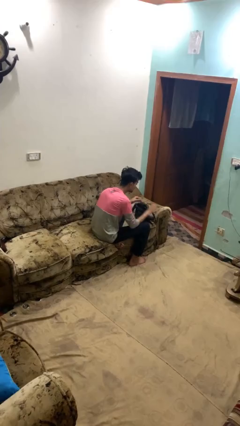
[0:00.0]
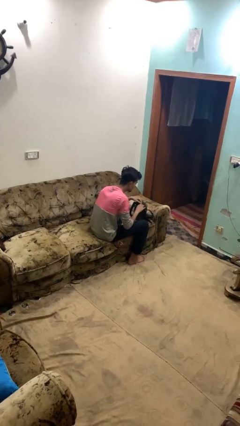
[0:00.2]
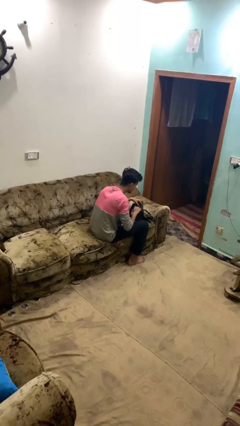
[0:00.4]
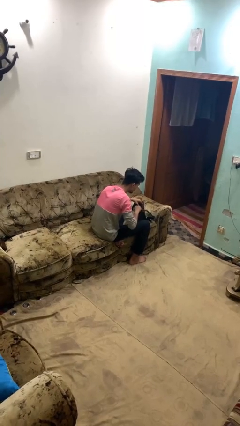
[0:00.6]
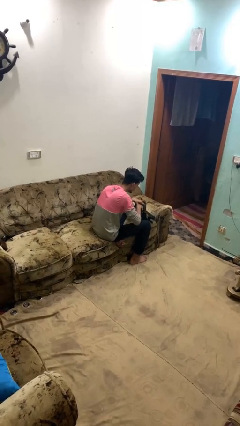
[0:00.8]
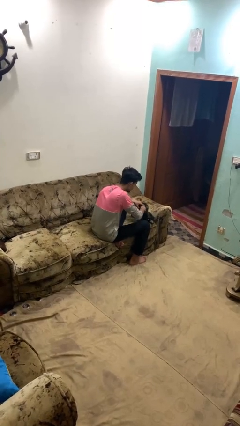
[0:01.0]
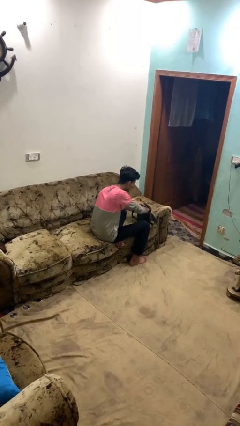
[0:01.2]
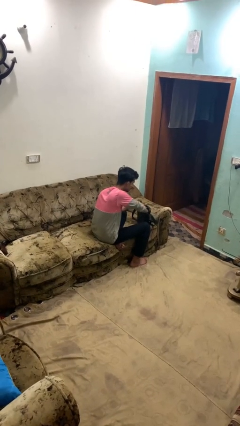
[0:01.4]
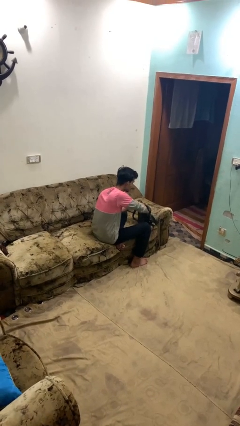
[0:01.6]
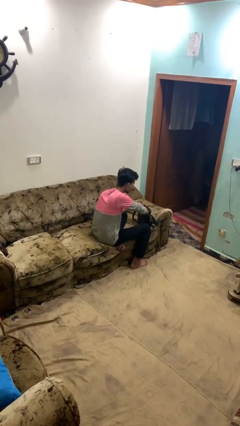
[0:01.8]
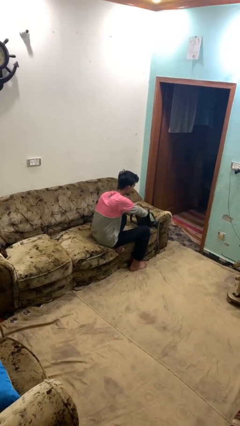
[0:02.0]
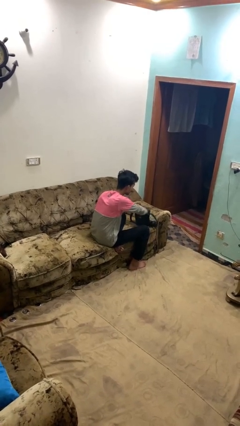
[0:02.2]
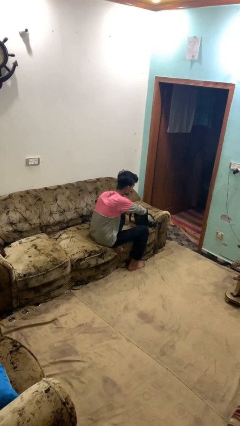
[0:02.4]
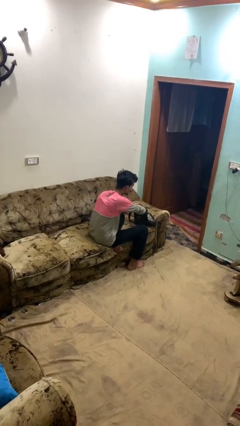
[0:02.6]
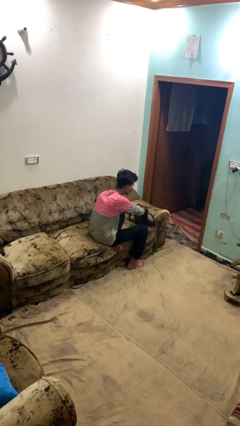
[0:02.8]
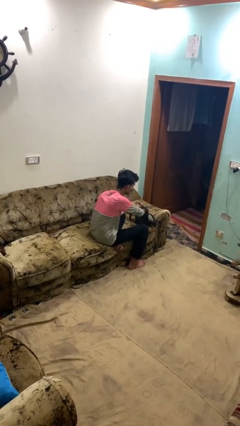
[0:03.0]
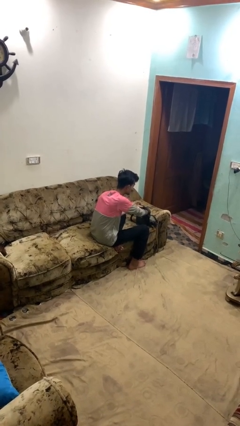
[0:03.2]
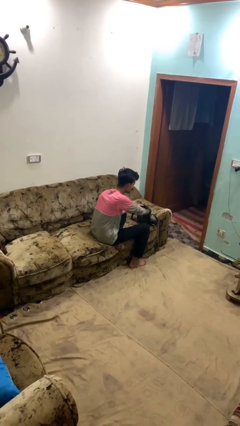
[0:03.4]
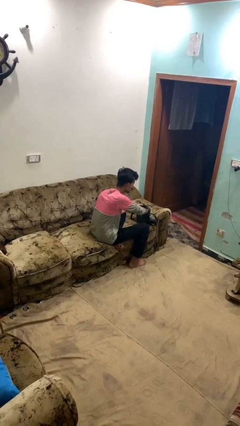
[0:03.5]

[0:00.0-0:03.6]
person searches in backpack

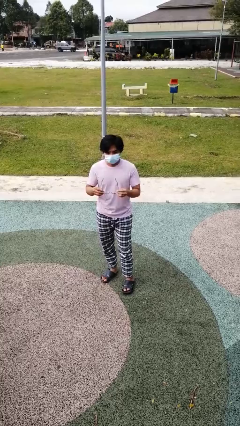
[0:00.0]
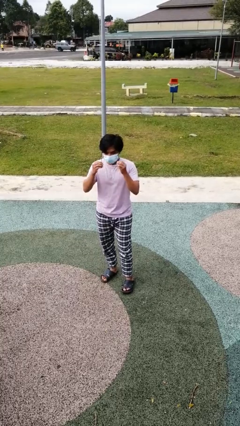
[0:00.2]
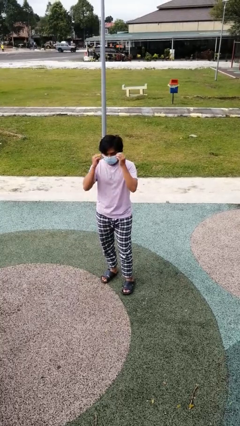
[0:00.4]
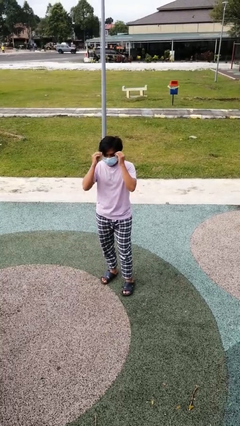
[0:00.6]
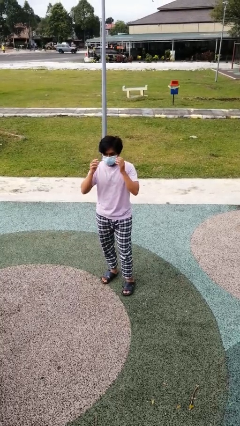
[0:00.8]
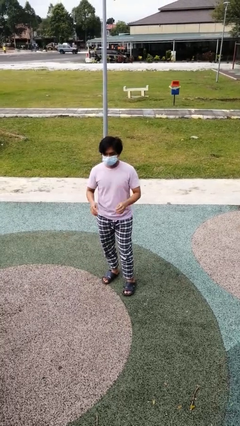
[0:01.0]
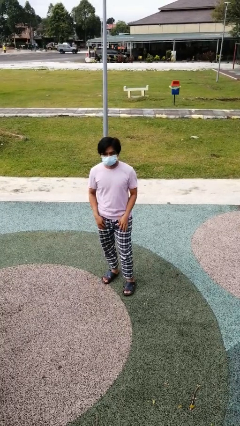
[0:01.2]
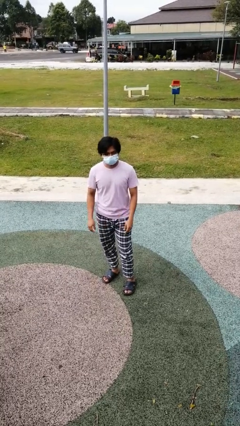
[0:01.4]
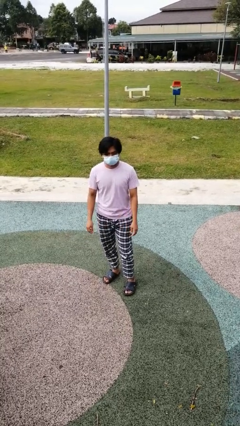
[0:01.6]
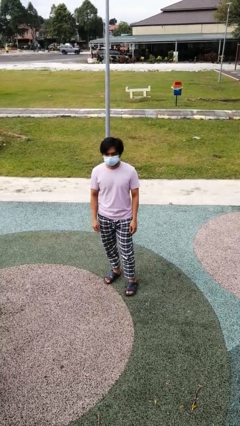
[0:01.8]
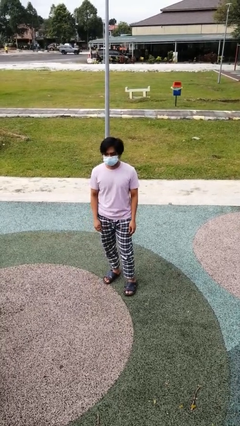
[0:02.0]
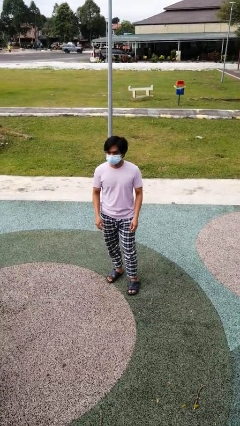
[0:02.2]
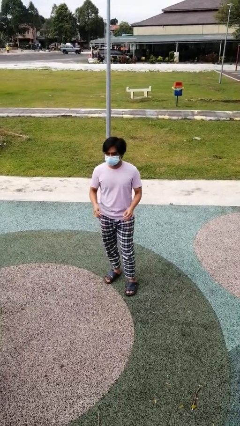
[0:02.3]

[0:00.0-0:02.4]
person puts on glasses

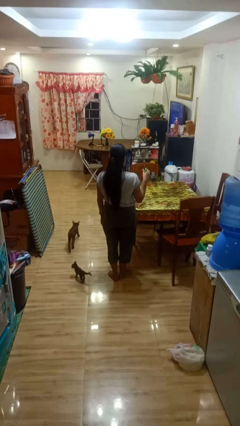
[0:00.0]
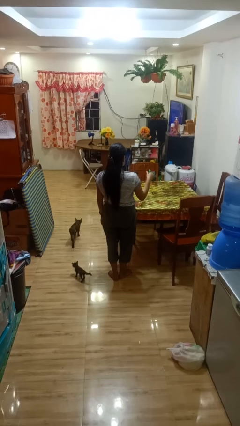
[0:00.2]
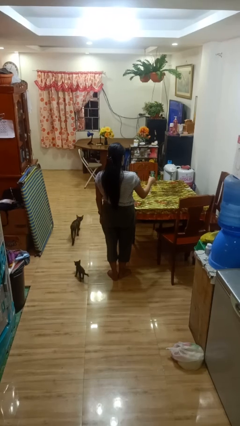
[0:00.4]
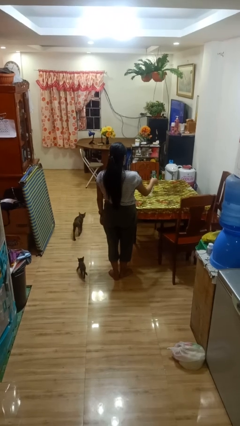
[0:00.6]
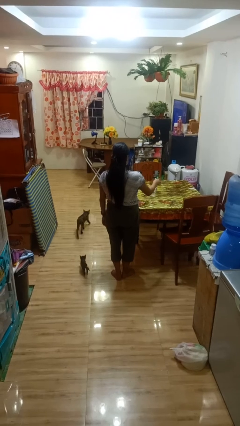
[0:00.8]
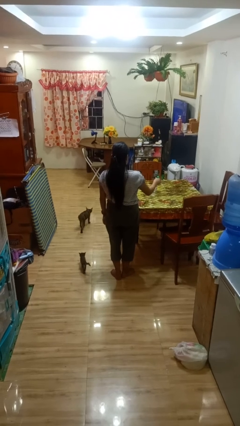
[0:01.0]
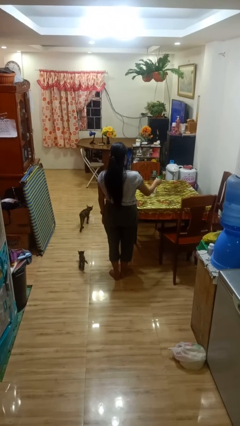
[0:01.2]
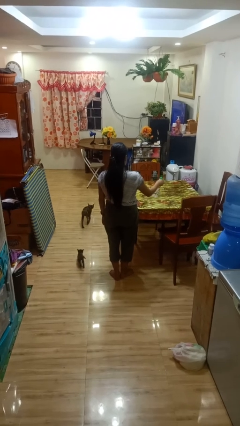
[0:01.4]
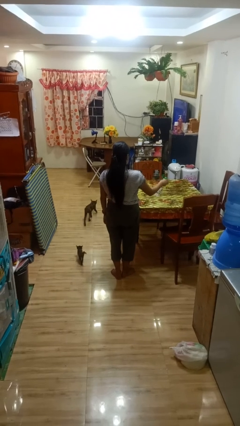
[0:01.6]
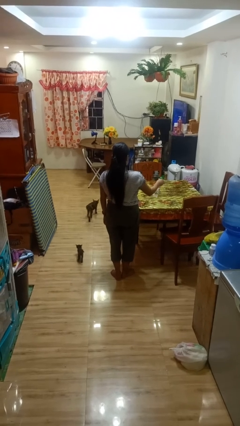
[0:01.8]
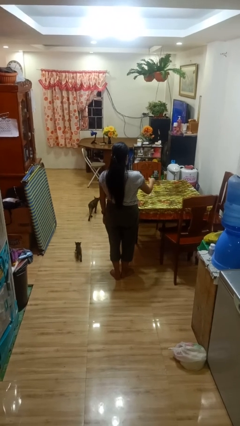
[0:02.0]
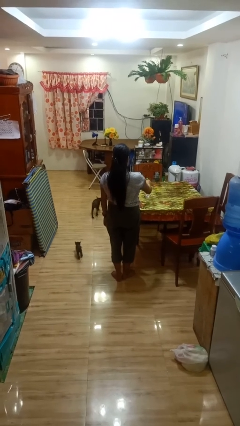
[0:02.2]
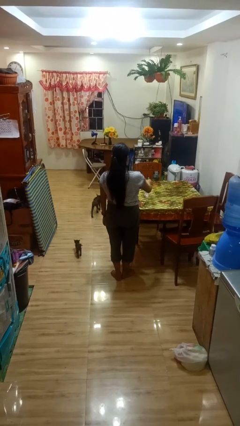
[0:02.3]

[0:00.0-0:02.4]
person sprays from bottle

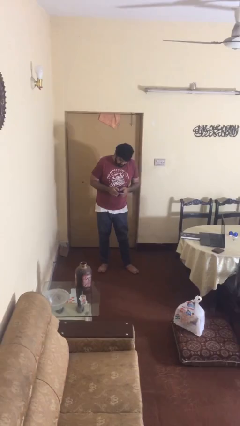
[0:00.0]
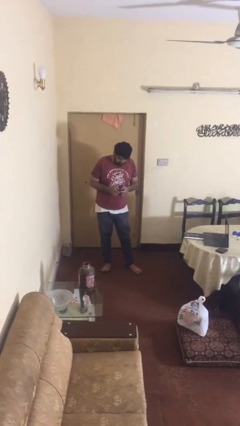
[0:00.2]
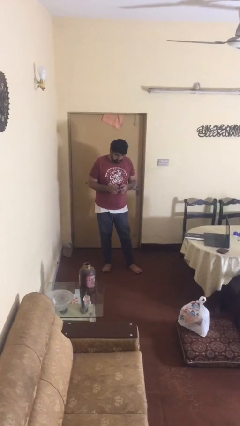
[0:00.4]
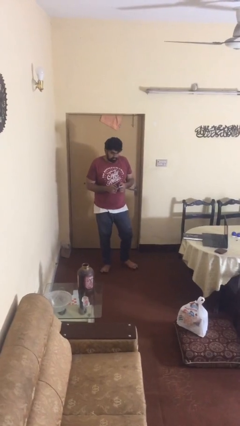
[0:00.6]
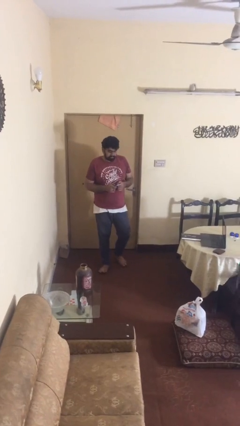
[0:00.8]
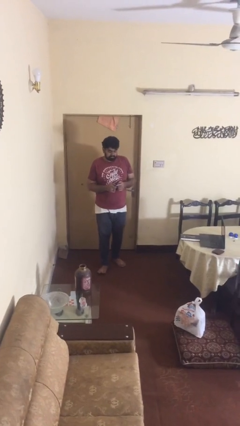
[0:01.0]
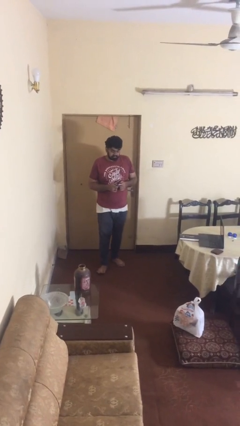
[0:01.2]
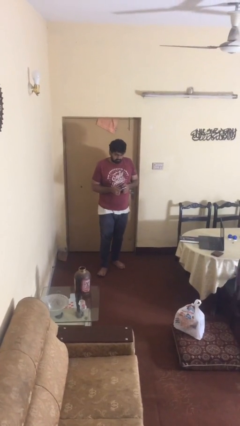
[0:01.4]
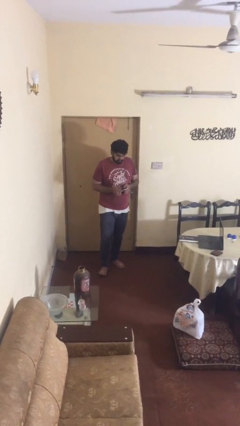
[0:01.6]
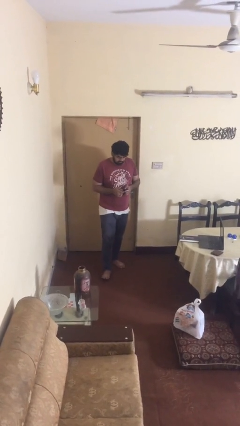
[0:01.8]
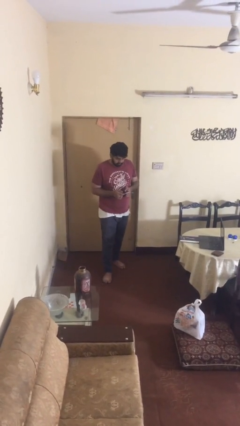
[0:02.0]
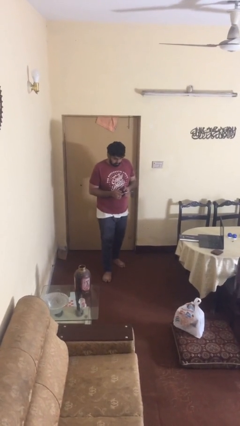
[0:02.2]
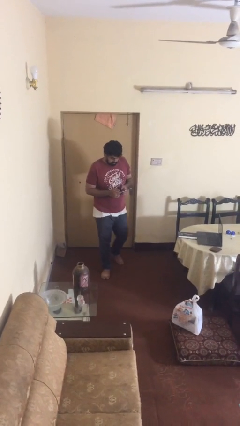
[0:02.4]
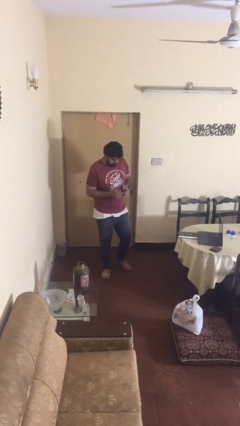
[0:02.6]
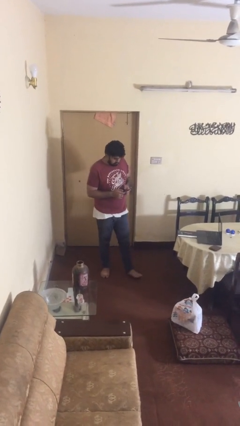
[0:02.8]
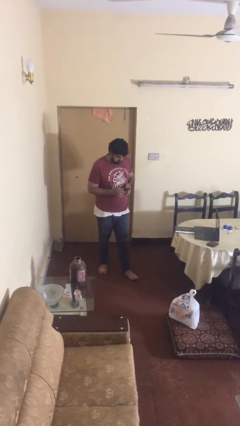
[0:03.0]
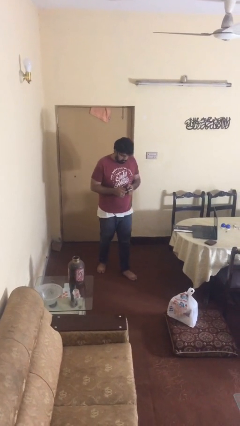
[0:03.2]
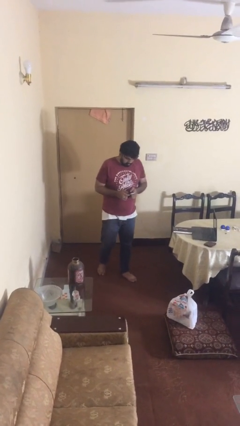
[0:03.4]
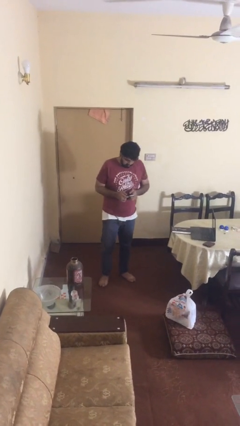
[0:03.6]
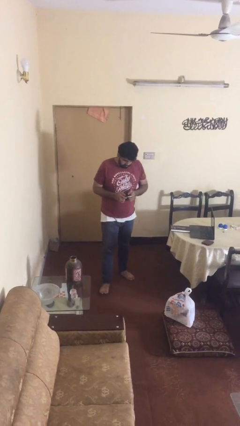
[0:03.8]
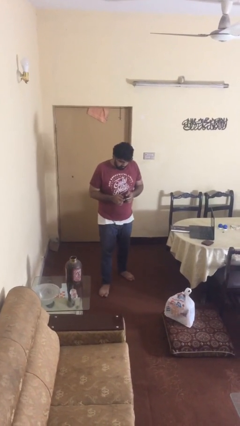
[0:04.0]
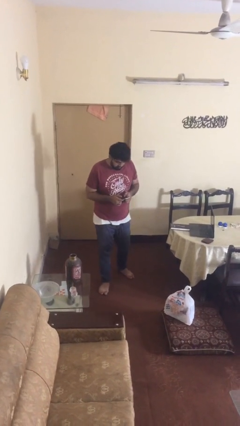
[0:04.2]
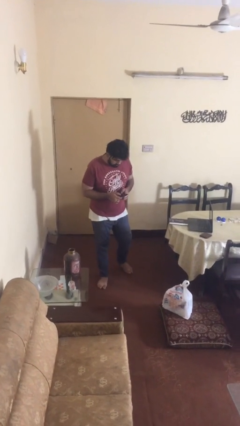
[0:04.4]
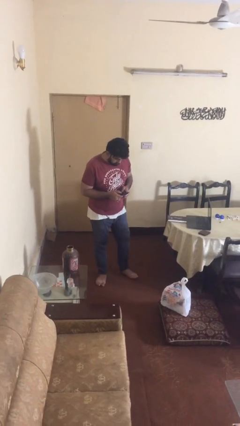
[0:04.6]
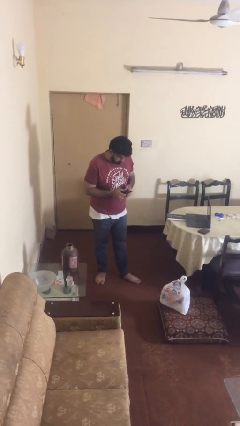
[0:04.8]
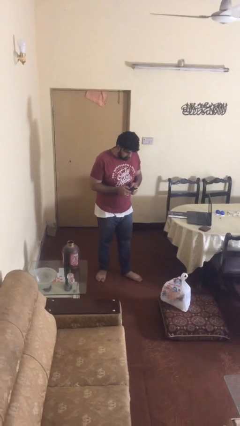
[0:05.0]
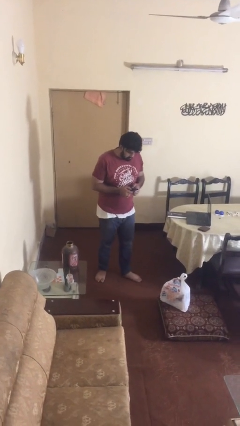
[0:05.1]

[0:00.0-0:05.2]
person texts on phone

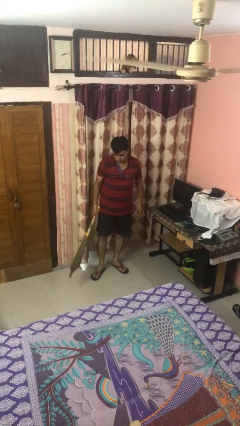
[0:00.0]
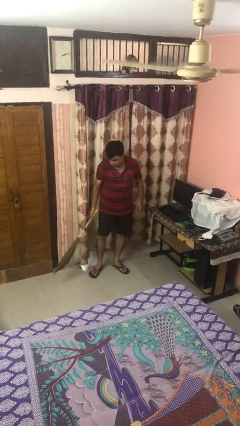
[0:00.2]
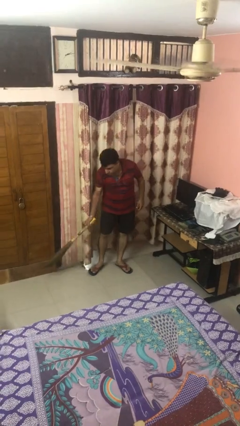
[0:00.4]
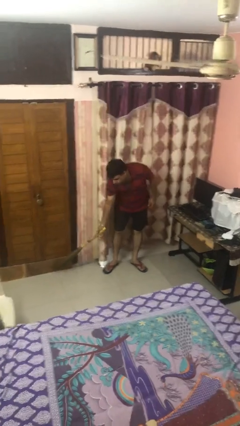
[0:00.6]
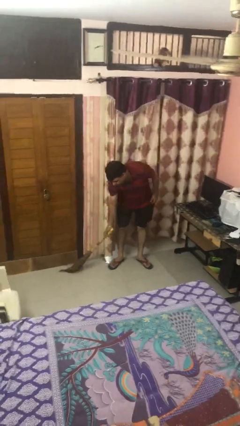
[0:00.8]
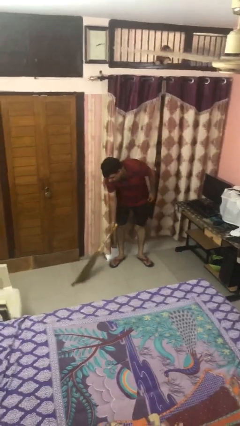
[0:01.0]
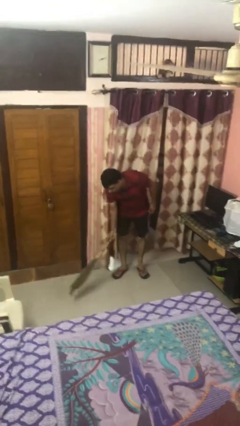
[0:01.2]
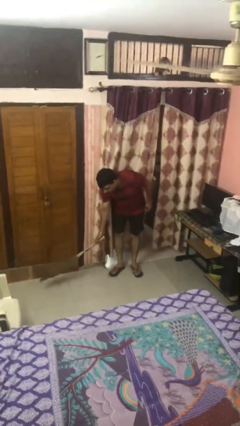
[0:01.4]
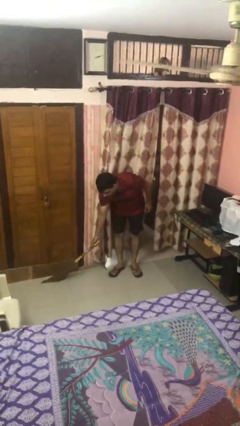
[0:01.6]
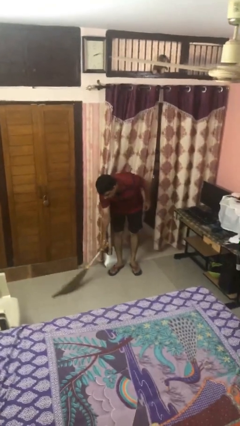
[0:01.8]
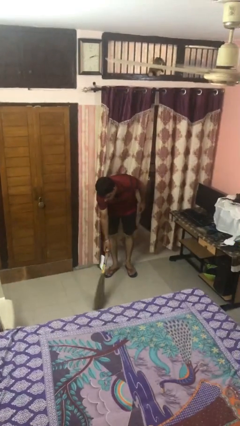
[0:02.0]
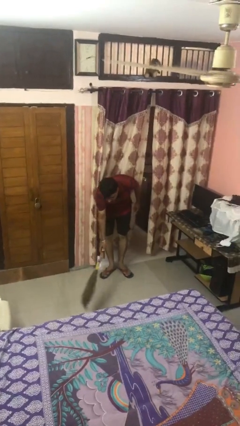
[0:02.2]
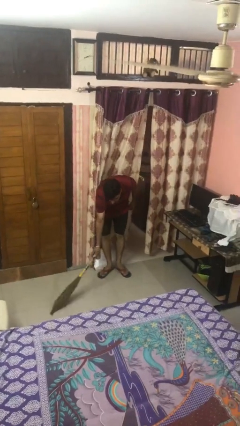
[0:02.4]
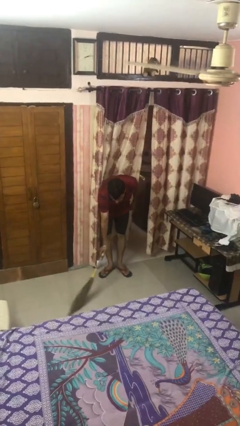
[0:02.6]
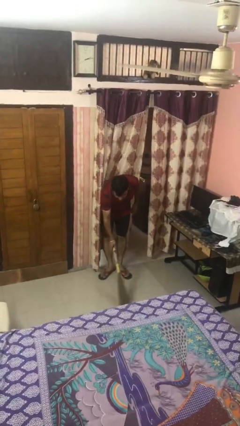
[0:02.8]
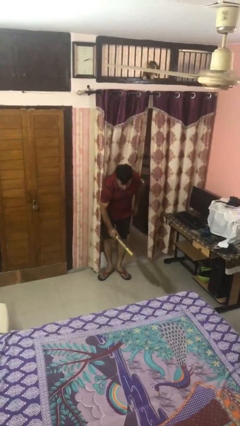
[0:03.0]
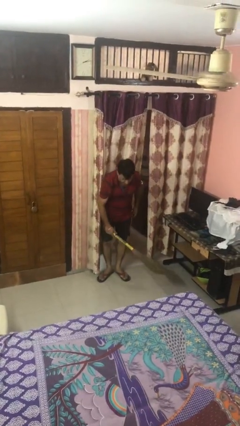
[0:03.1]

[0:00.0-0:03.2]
person sweeps floor

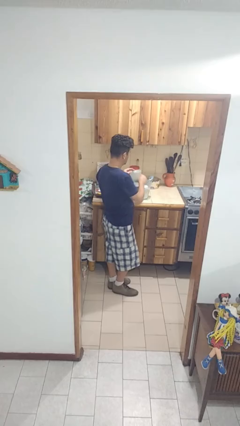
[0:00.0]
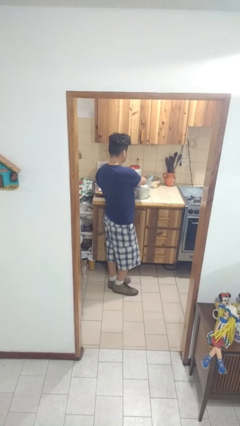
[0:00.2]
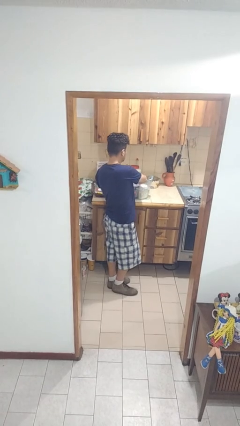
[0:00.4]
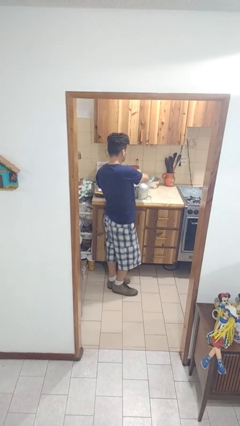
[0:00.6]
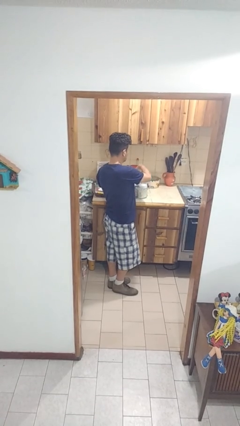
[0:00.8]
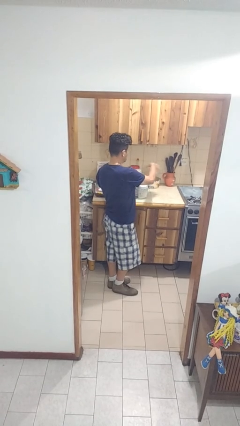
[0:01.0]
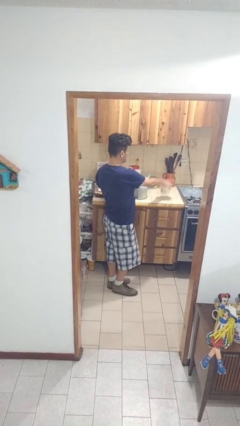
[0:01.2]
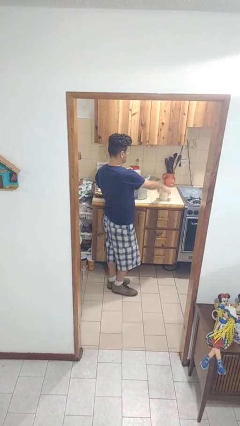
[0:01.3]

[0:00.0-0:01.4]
person takes object from bag
